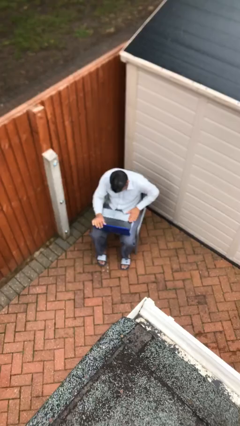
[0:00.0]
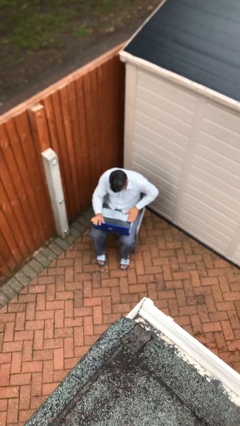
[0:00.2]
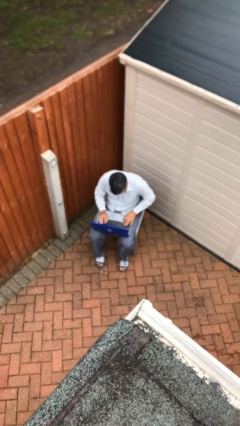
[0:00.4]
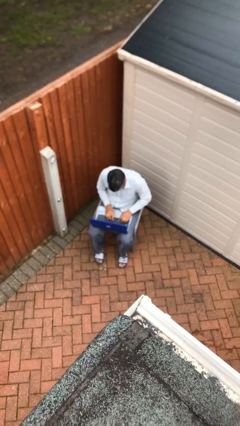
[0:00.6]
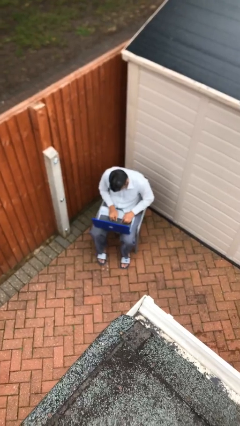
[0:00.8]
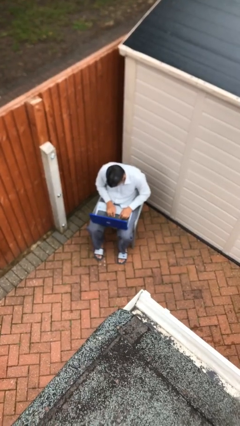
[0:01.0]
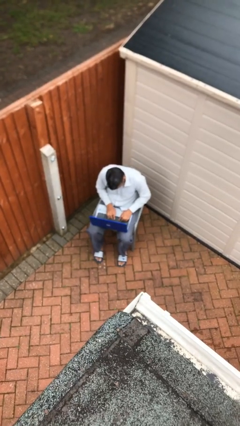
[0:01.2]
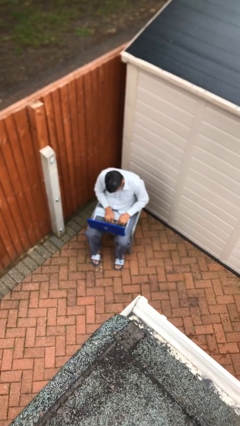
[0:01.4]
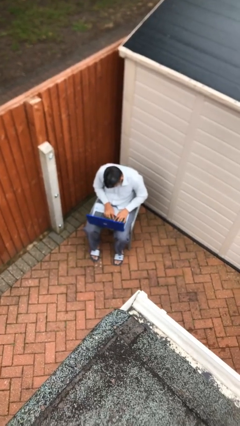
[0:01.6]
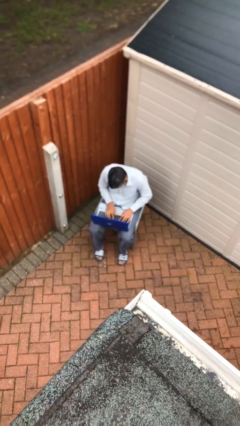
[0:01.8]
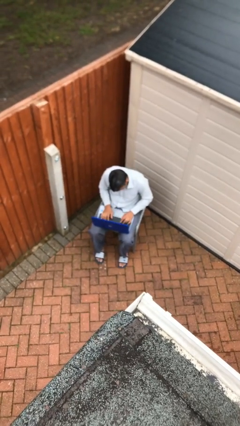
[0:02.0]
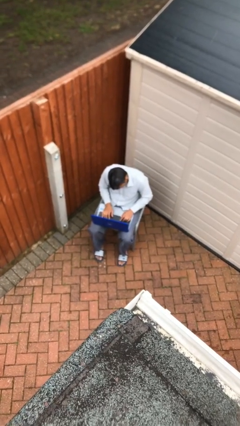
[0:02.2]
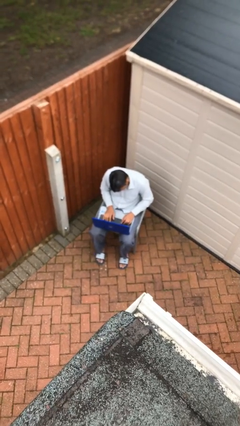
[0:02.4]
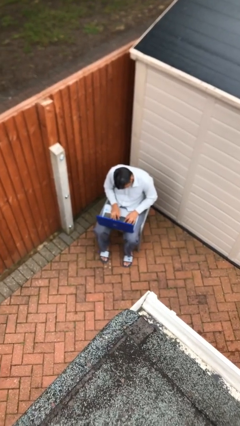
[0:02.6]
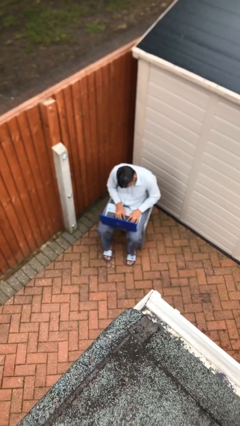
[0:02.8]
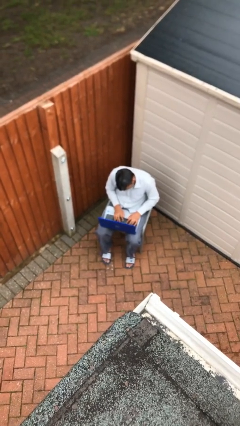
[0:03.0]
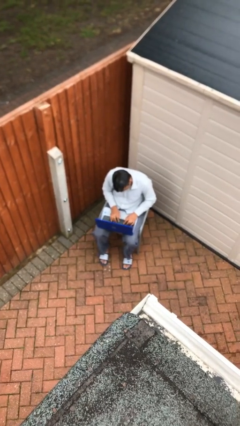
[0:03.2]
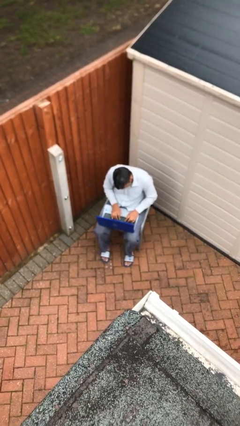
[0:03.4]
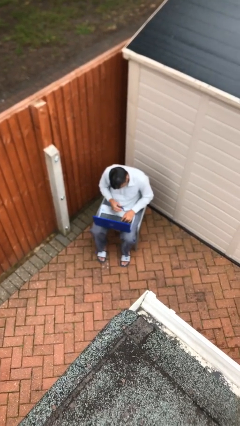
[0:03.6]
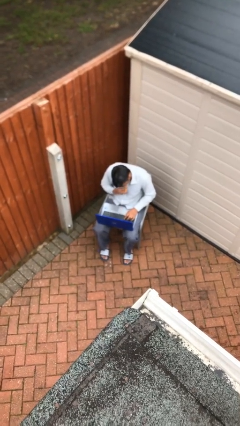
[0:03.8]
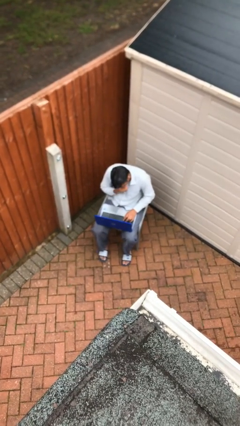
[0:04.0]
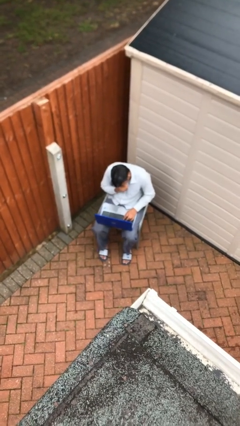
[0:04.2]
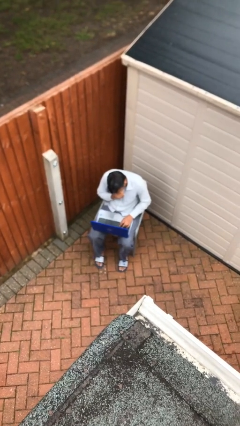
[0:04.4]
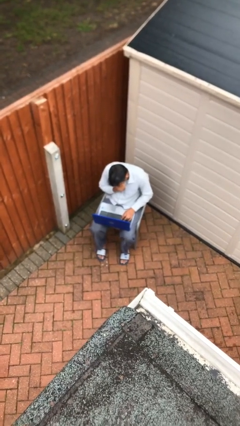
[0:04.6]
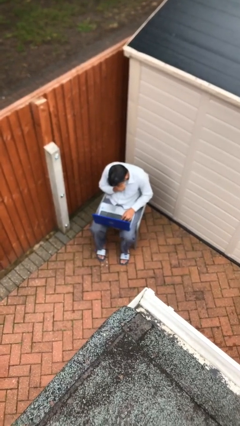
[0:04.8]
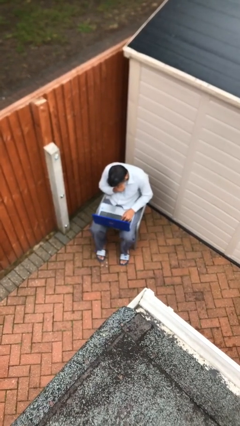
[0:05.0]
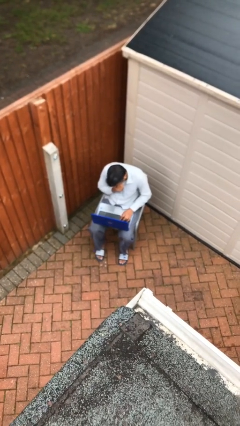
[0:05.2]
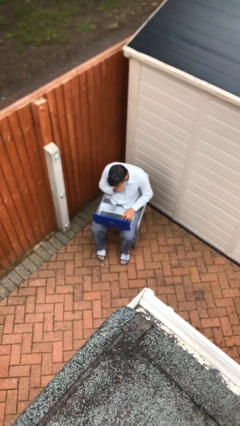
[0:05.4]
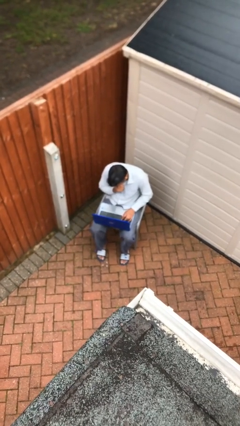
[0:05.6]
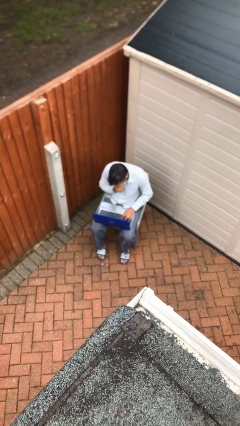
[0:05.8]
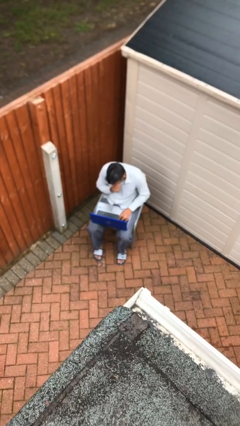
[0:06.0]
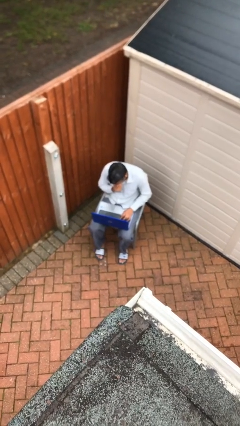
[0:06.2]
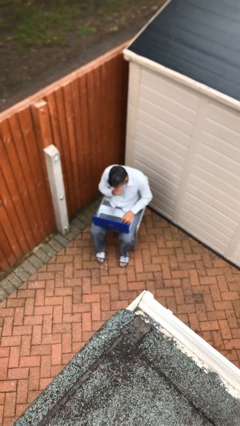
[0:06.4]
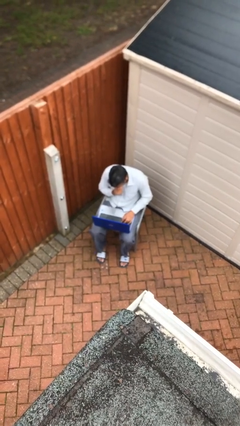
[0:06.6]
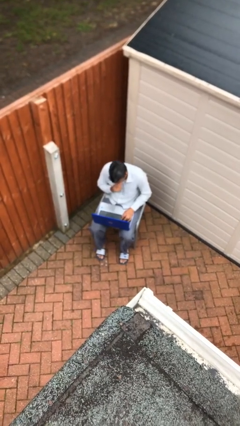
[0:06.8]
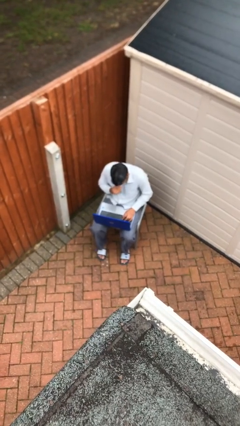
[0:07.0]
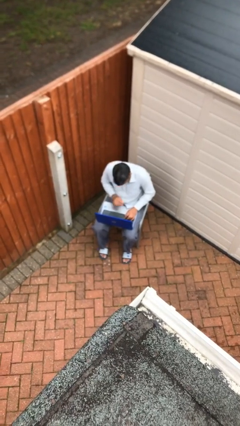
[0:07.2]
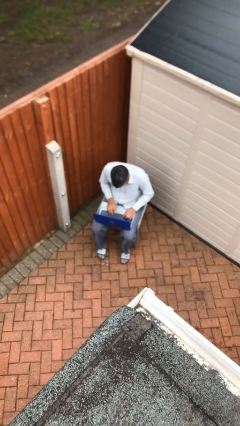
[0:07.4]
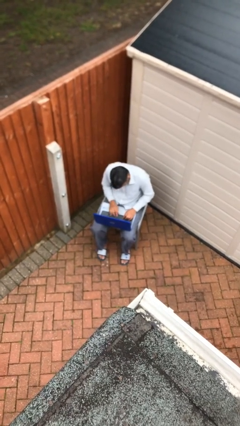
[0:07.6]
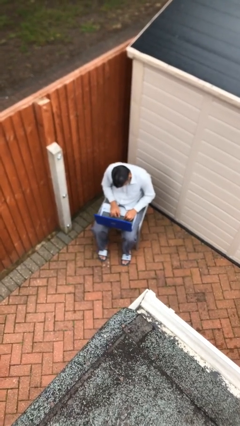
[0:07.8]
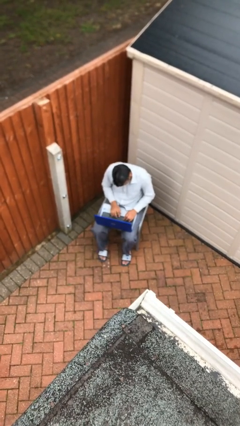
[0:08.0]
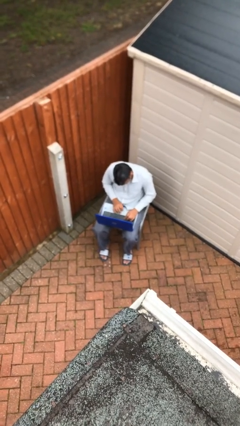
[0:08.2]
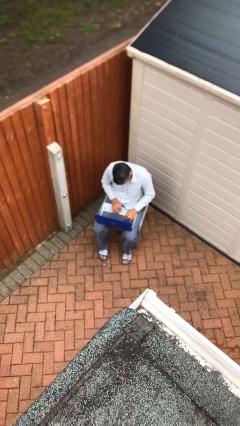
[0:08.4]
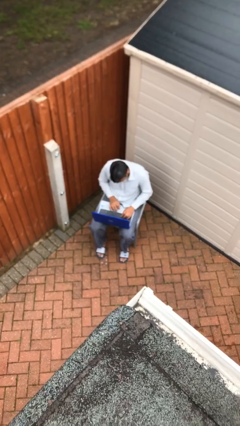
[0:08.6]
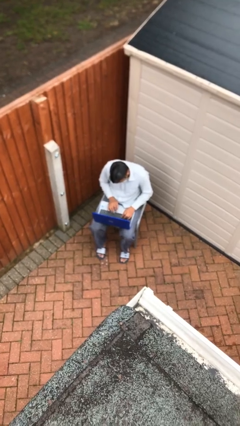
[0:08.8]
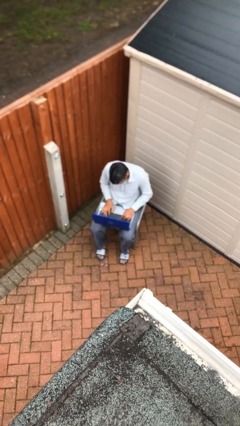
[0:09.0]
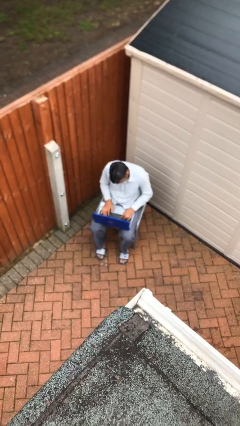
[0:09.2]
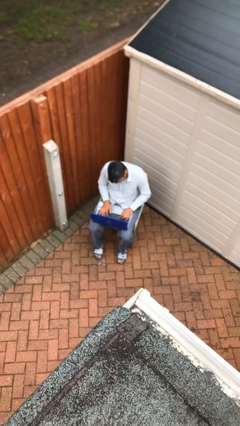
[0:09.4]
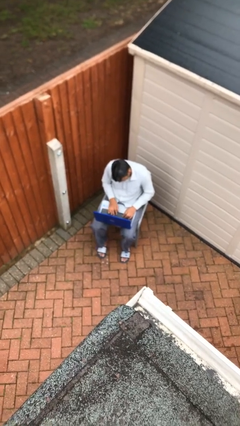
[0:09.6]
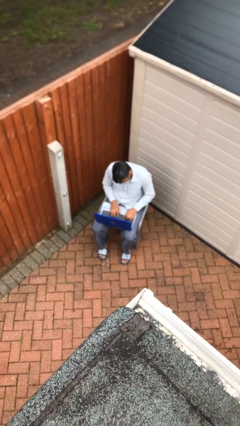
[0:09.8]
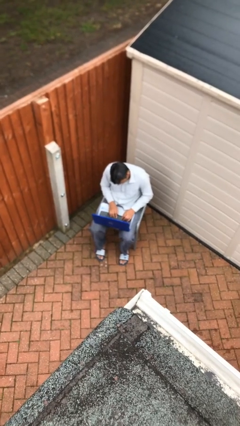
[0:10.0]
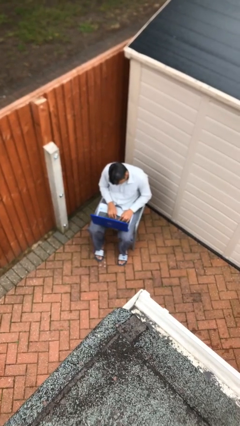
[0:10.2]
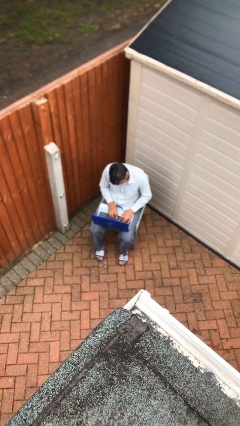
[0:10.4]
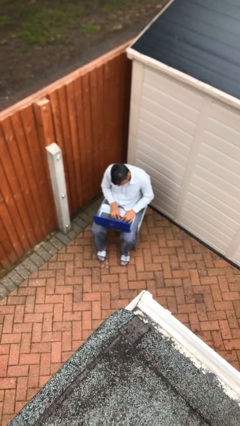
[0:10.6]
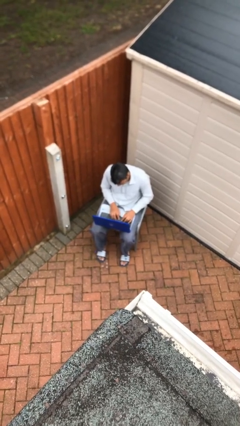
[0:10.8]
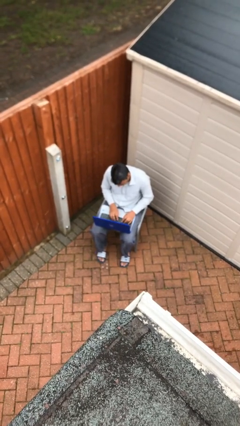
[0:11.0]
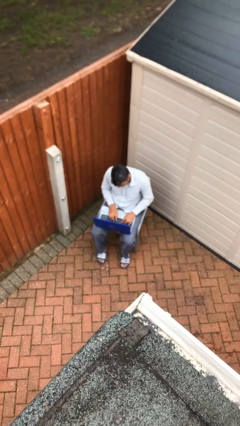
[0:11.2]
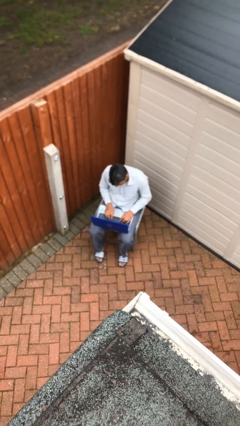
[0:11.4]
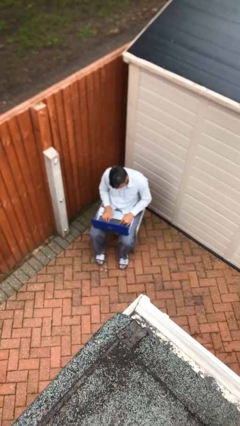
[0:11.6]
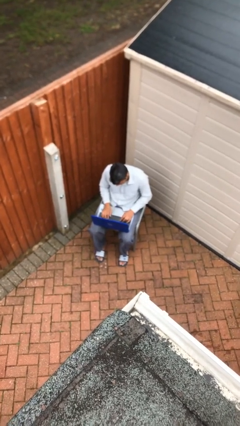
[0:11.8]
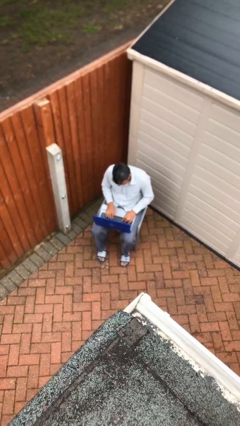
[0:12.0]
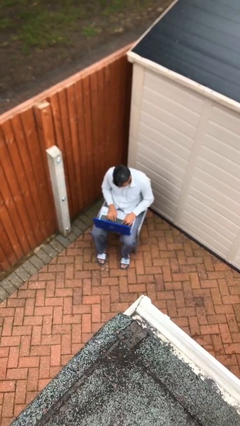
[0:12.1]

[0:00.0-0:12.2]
person interacts with laptop

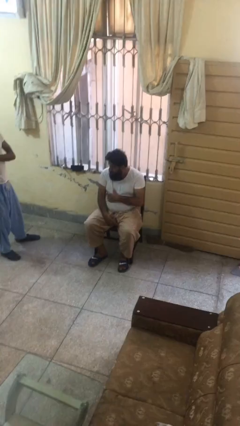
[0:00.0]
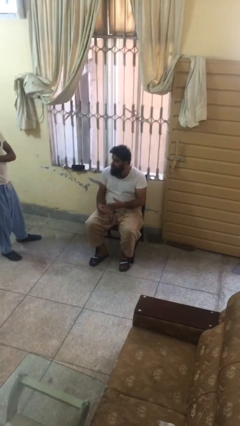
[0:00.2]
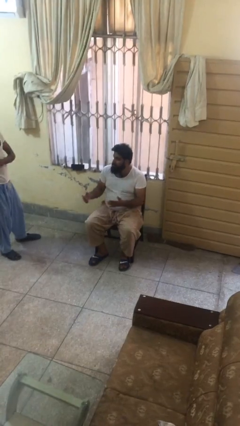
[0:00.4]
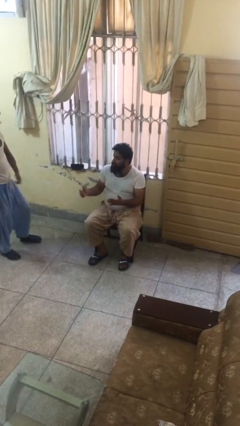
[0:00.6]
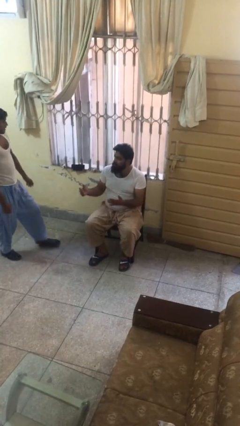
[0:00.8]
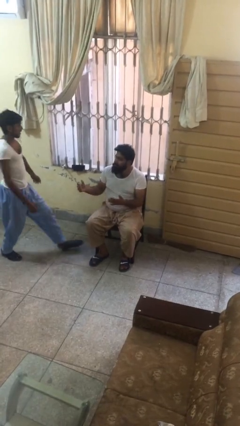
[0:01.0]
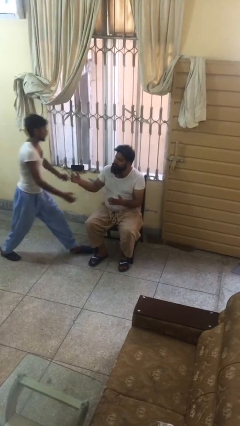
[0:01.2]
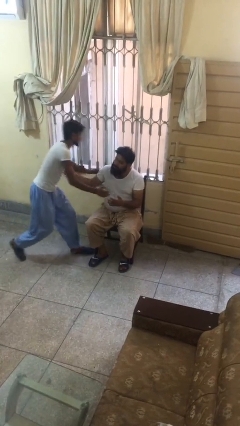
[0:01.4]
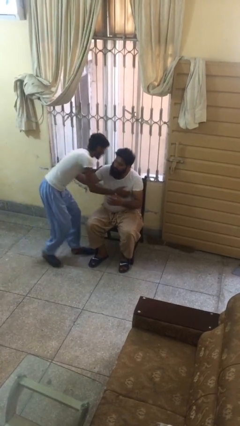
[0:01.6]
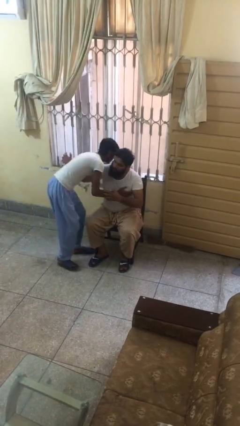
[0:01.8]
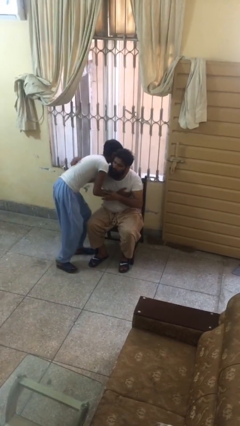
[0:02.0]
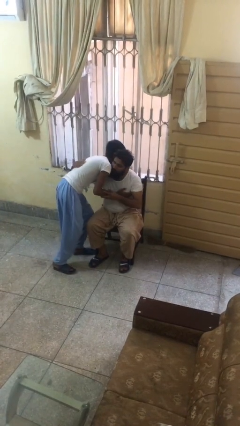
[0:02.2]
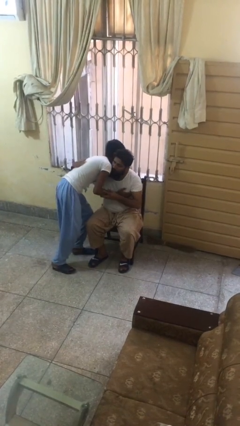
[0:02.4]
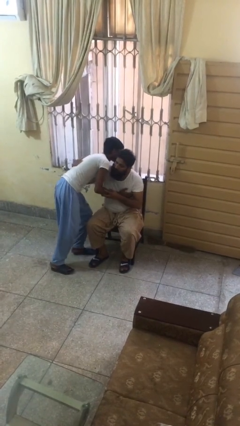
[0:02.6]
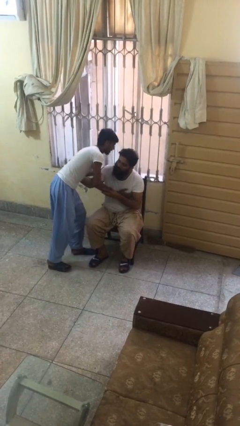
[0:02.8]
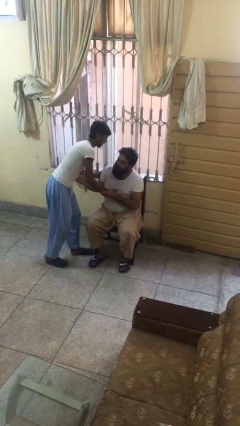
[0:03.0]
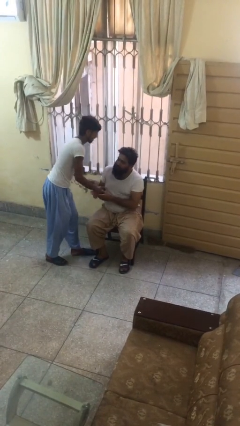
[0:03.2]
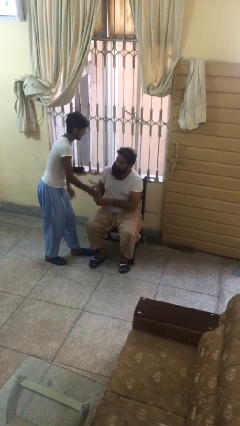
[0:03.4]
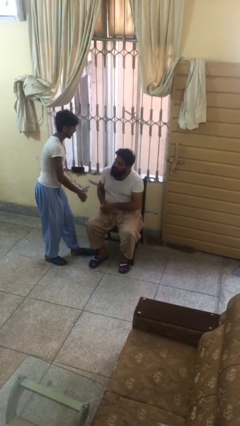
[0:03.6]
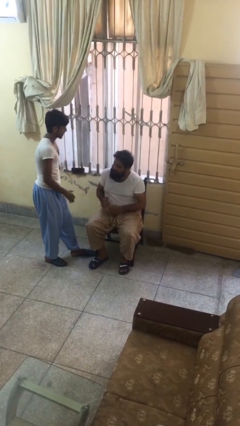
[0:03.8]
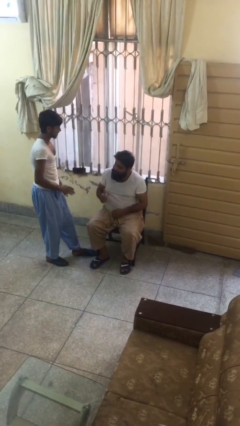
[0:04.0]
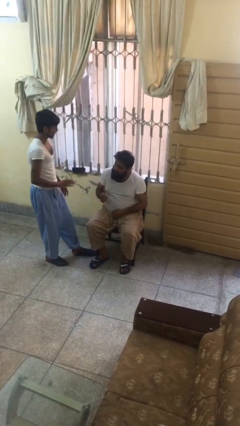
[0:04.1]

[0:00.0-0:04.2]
person embraces person

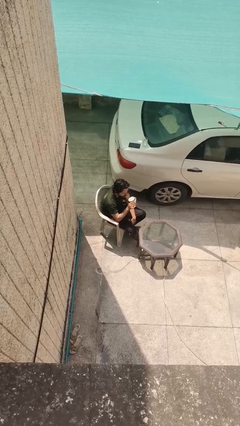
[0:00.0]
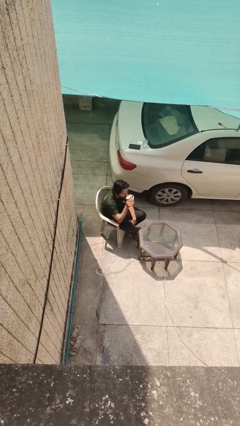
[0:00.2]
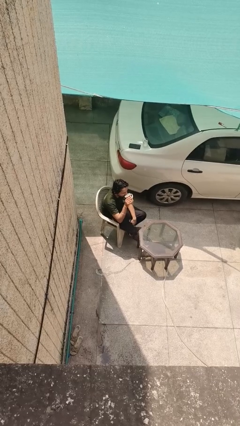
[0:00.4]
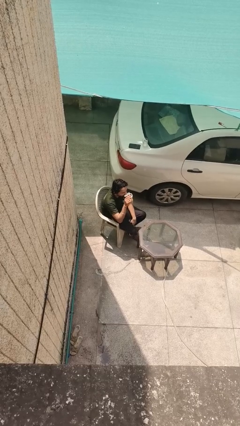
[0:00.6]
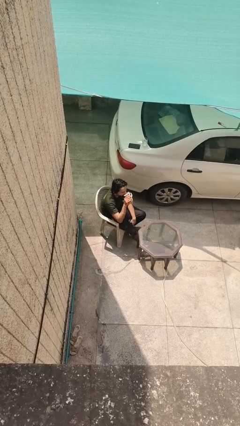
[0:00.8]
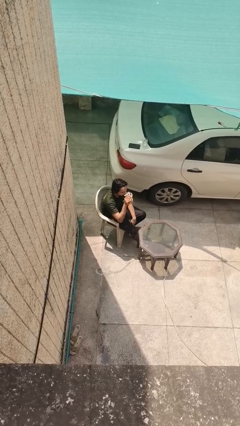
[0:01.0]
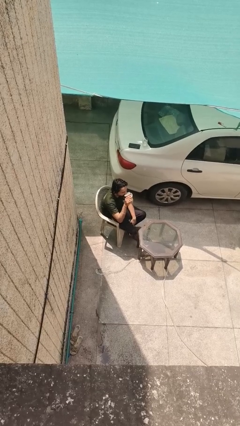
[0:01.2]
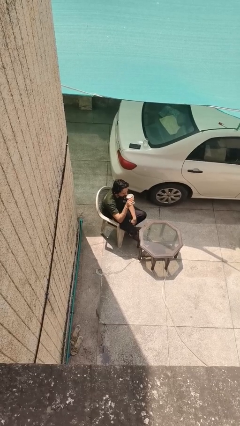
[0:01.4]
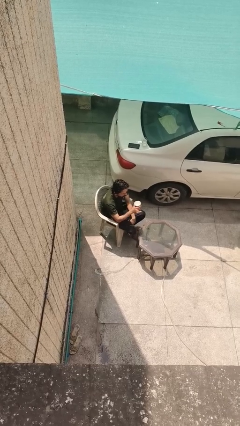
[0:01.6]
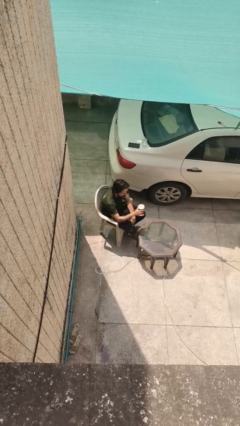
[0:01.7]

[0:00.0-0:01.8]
person drinks from mug
